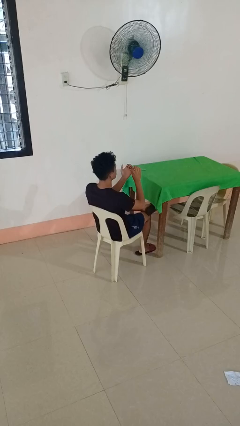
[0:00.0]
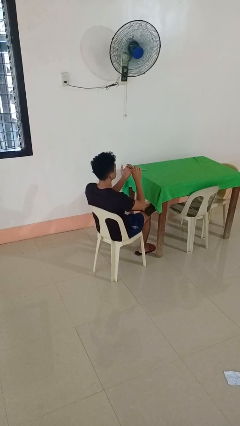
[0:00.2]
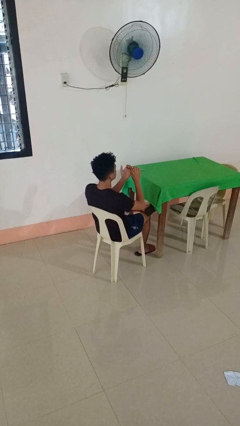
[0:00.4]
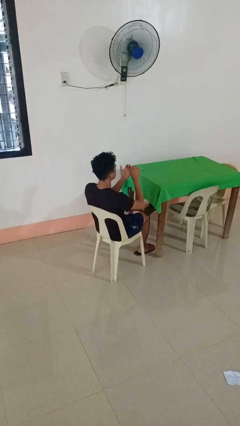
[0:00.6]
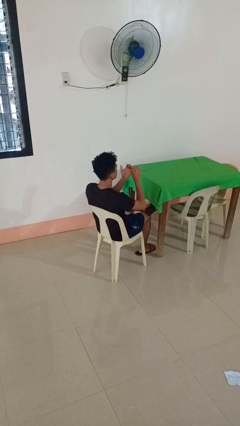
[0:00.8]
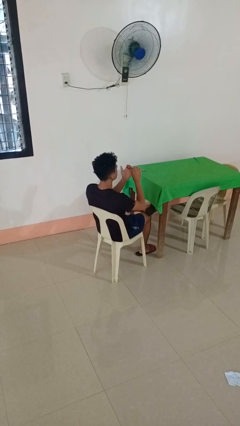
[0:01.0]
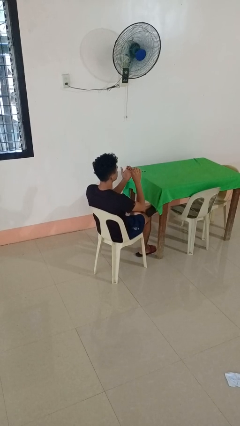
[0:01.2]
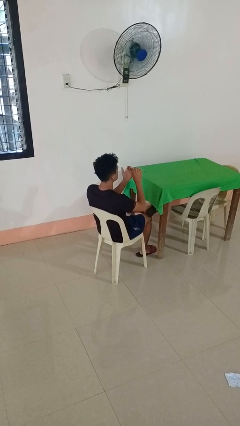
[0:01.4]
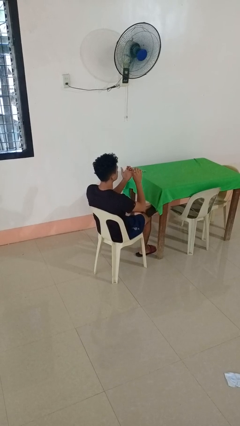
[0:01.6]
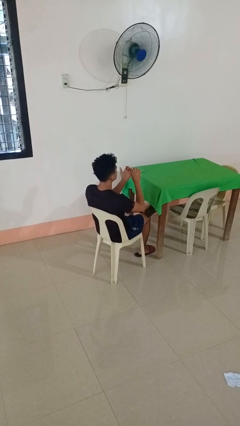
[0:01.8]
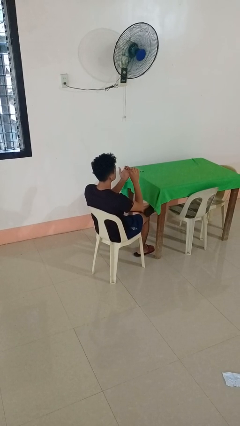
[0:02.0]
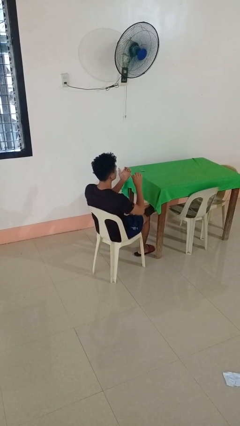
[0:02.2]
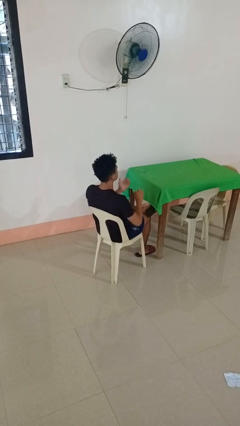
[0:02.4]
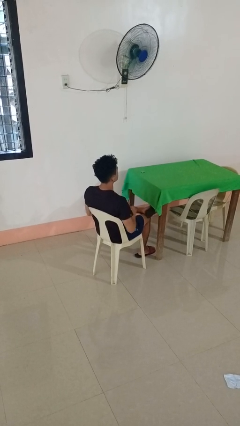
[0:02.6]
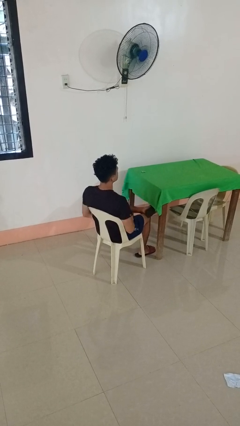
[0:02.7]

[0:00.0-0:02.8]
person files fingernails

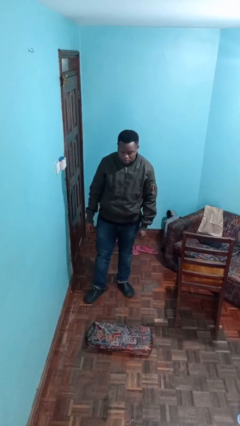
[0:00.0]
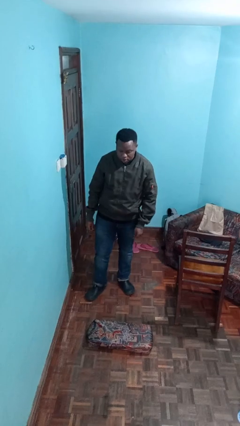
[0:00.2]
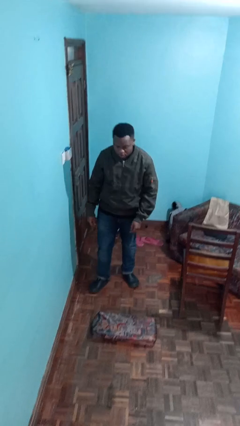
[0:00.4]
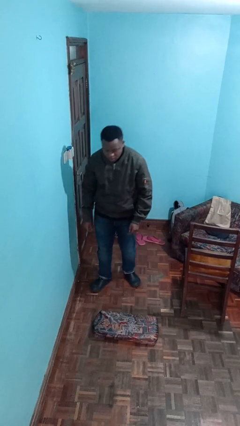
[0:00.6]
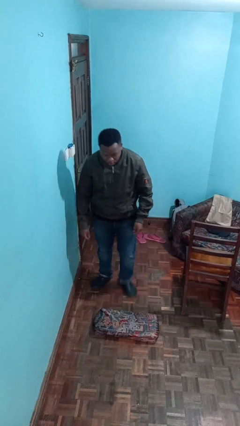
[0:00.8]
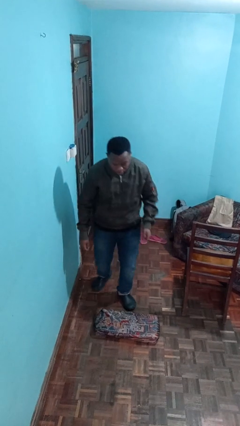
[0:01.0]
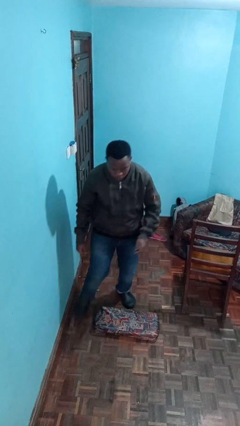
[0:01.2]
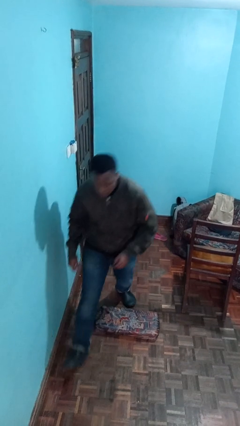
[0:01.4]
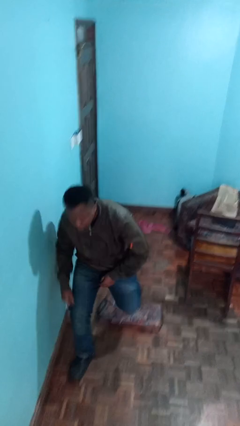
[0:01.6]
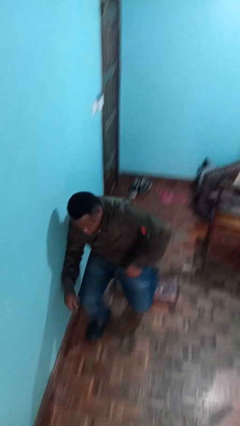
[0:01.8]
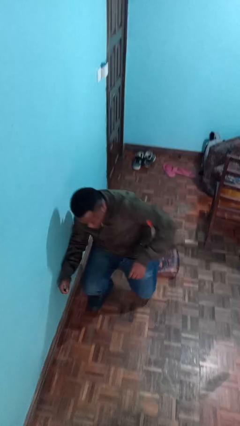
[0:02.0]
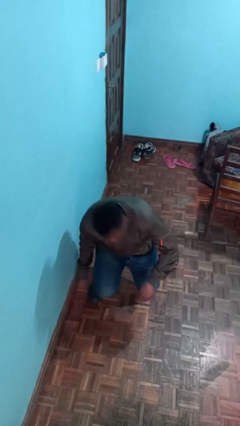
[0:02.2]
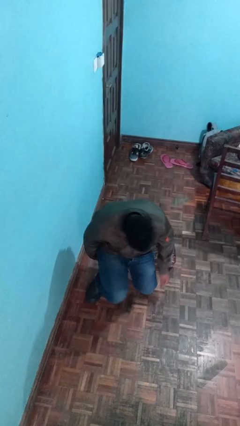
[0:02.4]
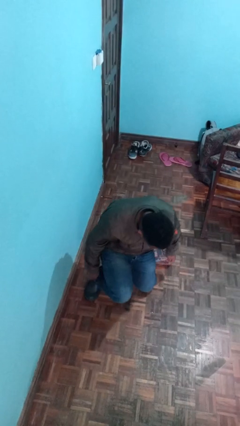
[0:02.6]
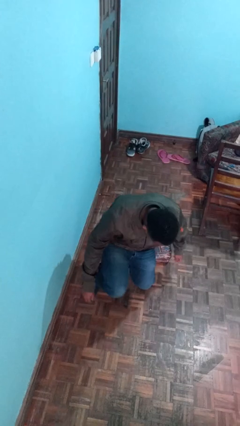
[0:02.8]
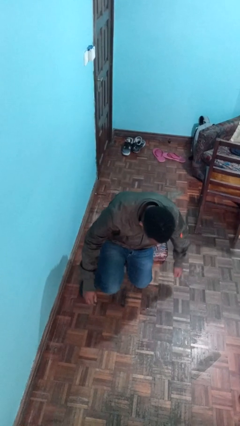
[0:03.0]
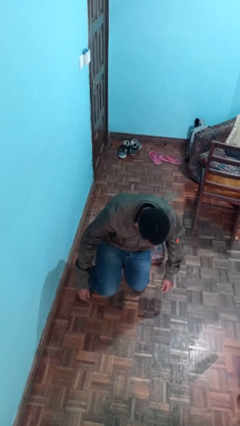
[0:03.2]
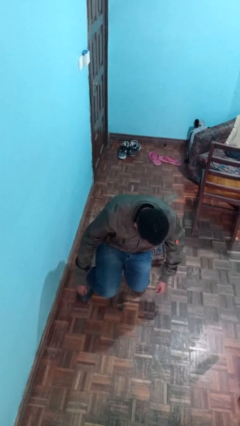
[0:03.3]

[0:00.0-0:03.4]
person trips on object on floor

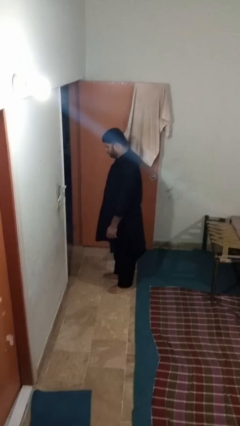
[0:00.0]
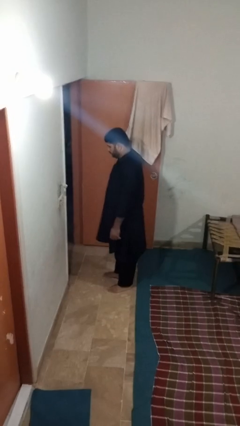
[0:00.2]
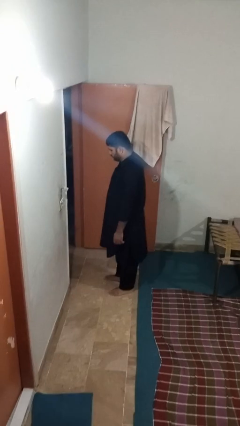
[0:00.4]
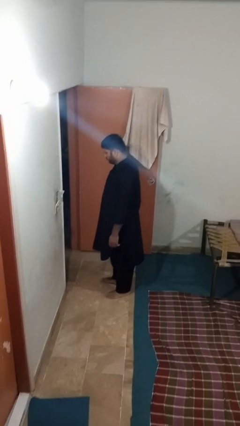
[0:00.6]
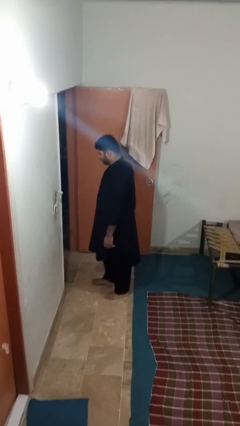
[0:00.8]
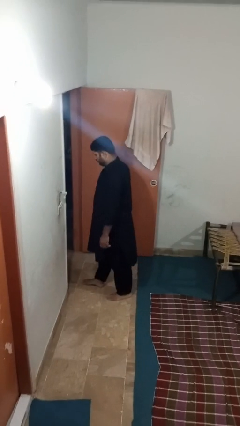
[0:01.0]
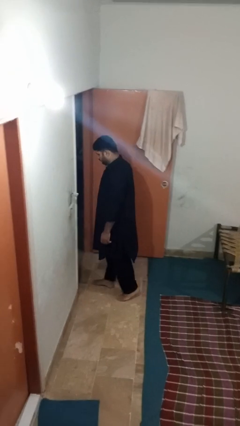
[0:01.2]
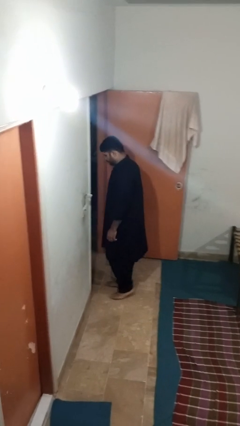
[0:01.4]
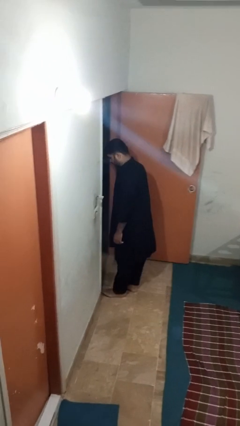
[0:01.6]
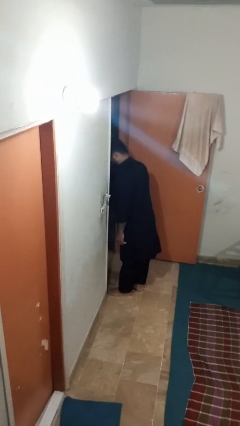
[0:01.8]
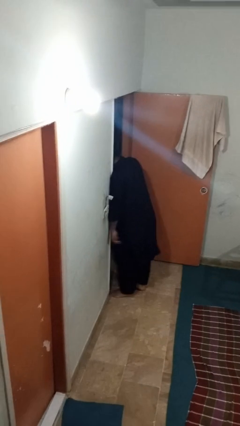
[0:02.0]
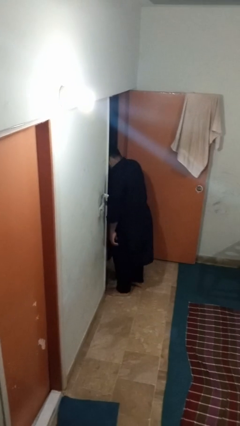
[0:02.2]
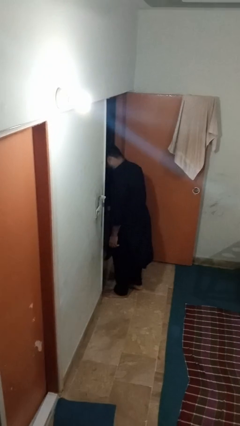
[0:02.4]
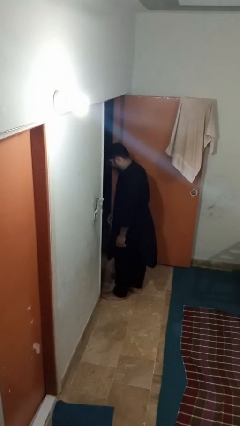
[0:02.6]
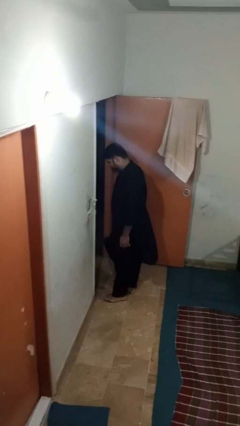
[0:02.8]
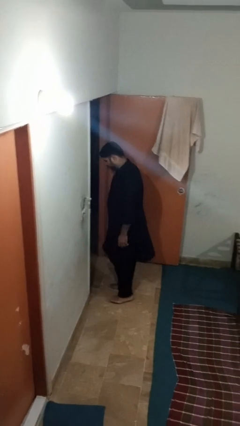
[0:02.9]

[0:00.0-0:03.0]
person bumps into wall

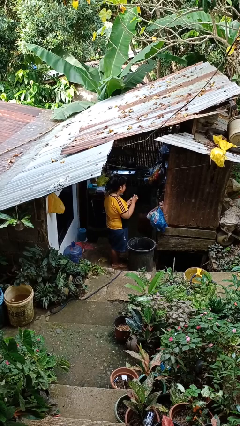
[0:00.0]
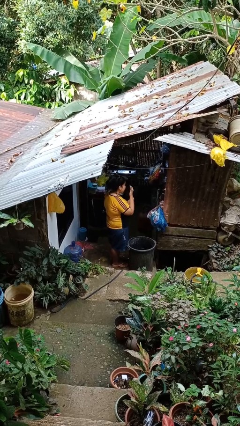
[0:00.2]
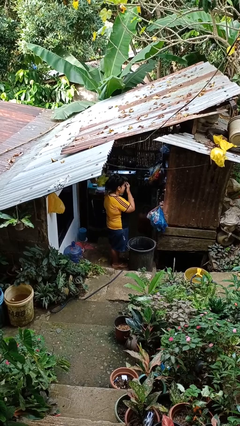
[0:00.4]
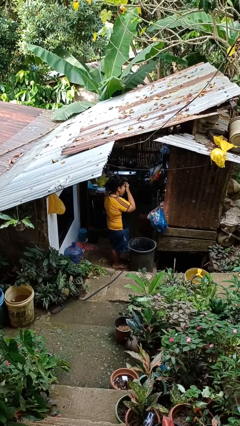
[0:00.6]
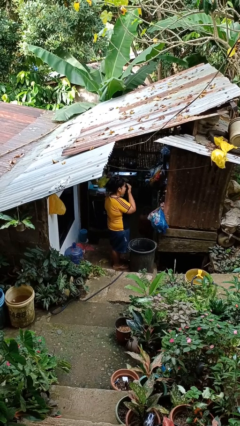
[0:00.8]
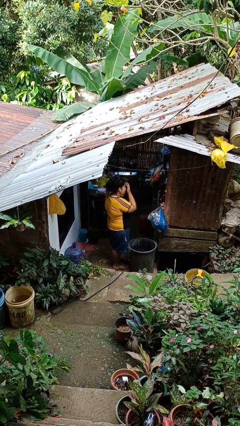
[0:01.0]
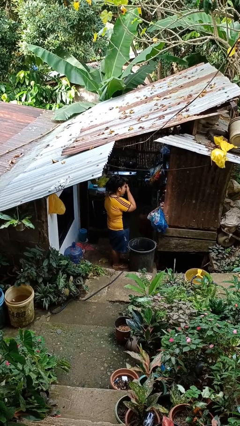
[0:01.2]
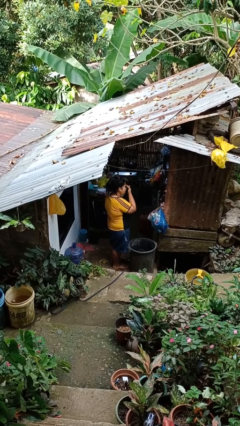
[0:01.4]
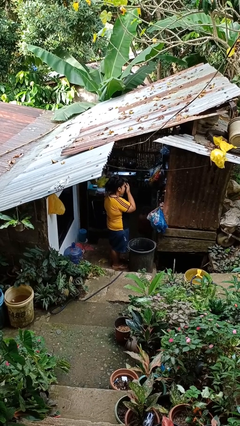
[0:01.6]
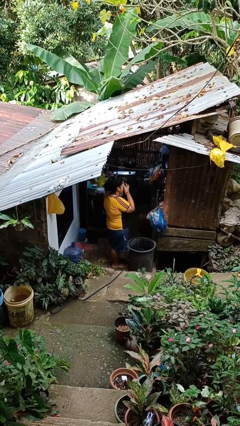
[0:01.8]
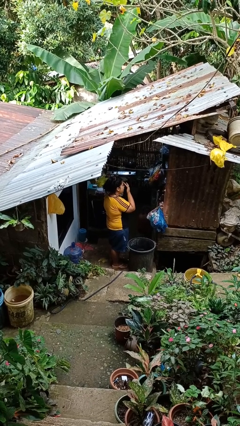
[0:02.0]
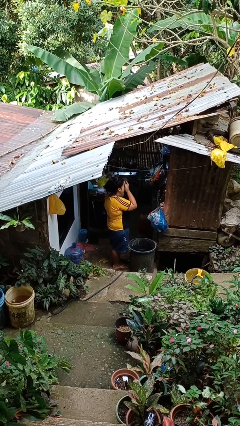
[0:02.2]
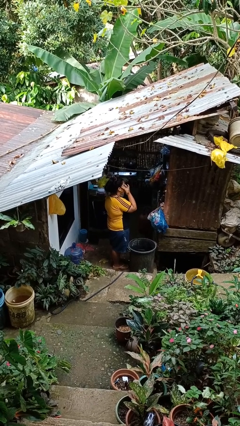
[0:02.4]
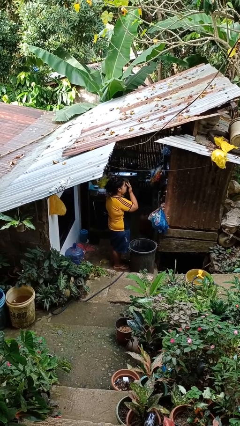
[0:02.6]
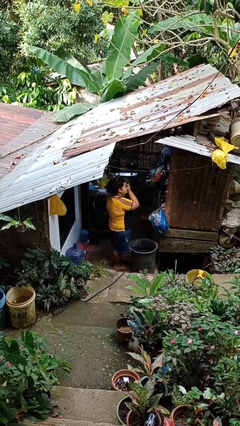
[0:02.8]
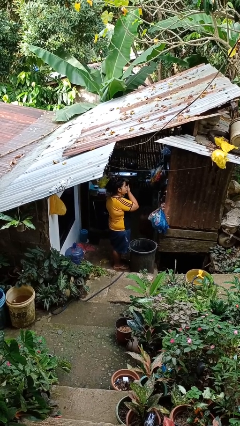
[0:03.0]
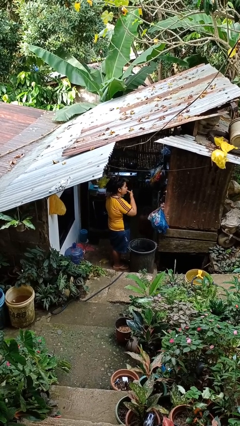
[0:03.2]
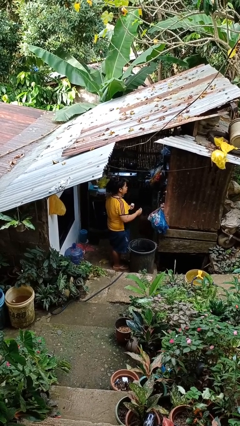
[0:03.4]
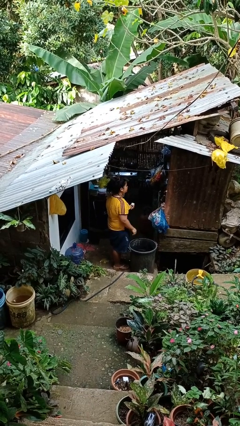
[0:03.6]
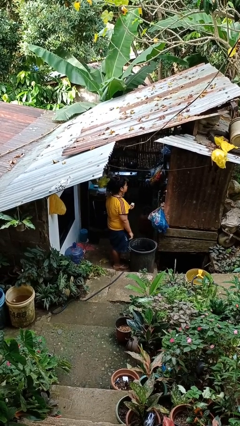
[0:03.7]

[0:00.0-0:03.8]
person applies facial moisturizer

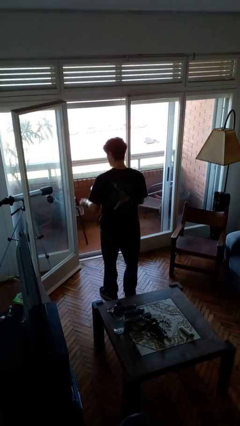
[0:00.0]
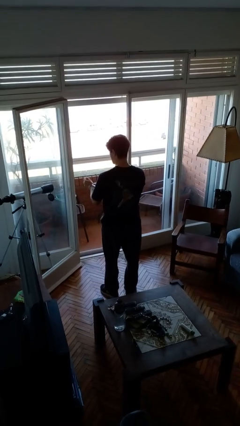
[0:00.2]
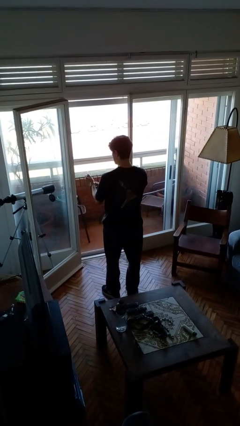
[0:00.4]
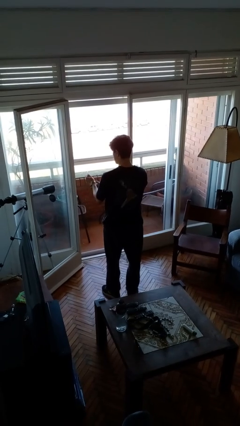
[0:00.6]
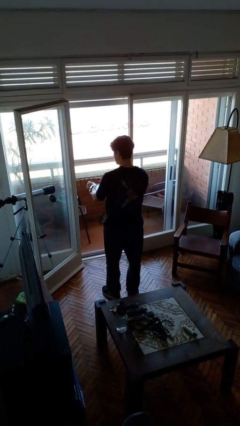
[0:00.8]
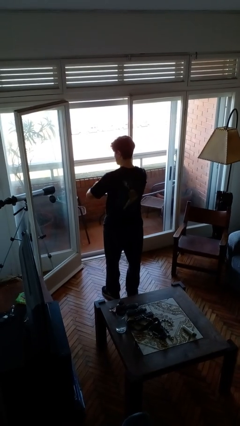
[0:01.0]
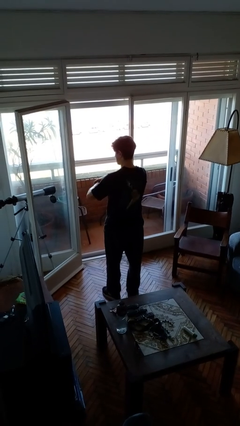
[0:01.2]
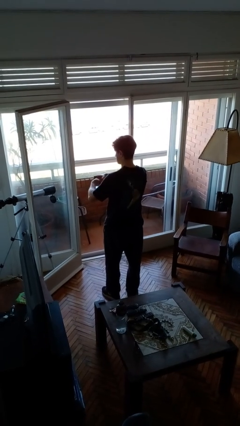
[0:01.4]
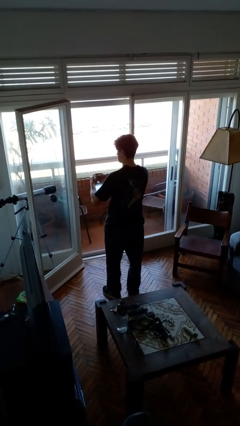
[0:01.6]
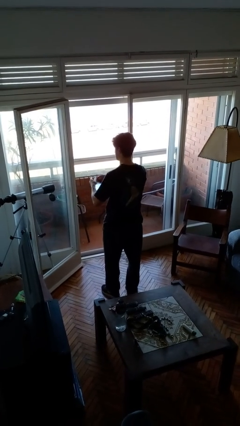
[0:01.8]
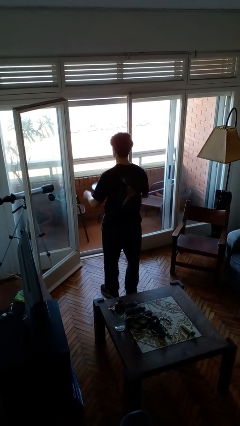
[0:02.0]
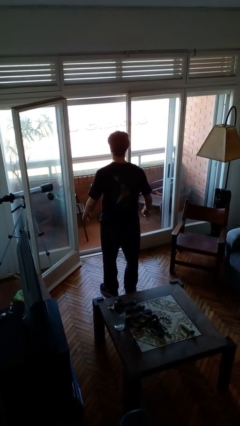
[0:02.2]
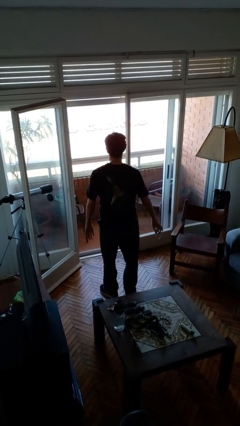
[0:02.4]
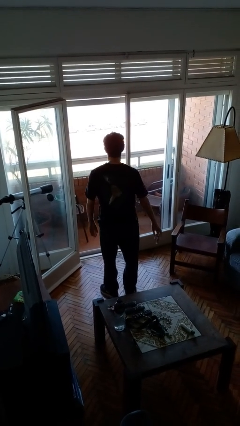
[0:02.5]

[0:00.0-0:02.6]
person takes off wristwatch

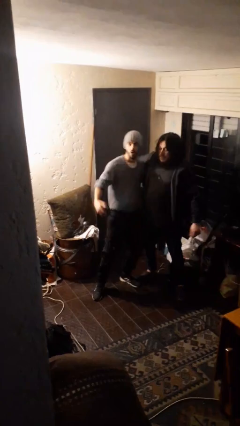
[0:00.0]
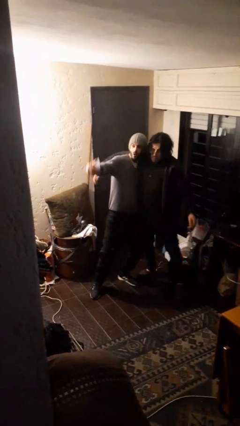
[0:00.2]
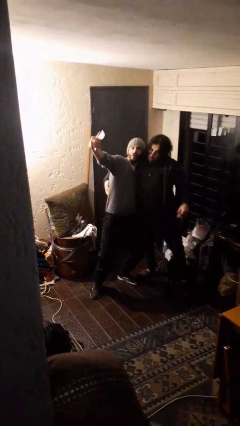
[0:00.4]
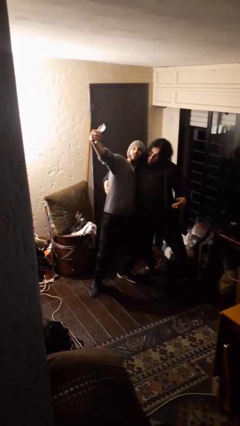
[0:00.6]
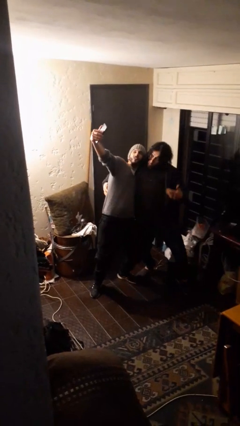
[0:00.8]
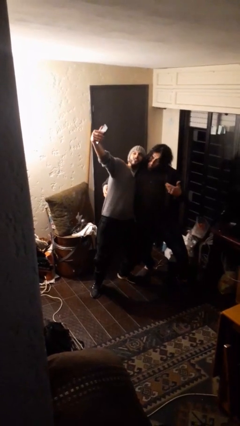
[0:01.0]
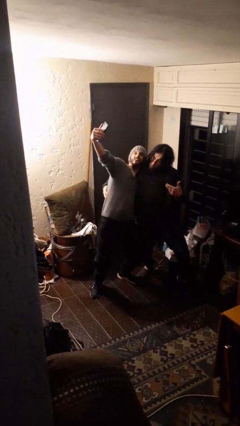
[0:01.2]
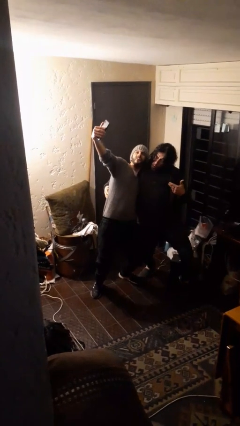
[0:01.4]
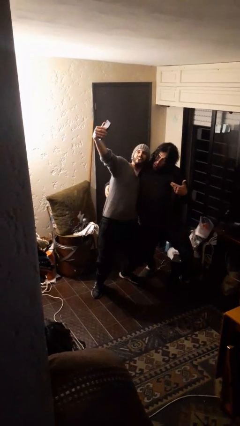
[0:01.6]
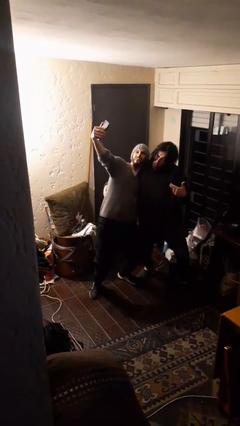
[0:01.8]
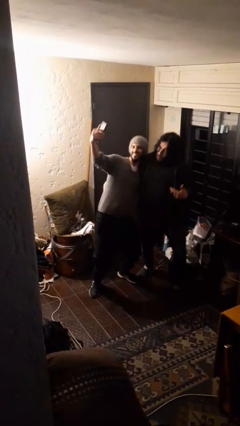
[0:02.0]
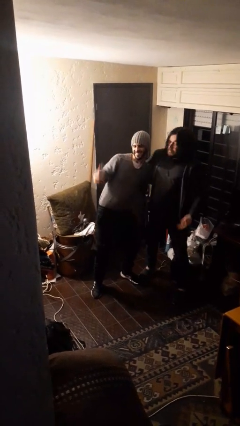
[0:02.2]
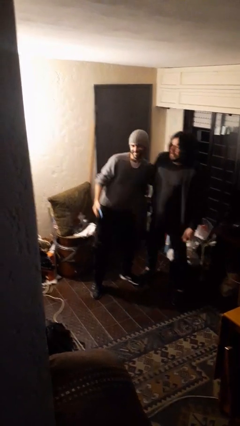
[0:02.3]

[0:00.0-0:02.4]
person takes selfie with person
